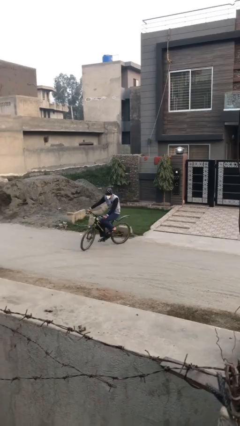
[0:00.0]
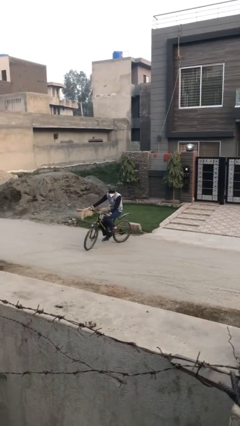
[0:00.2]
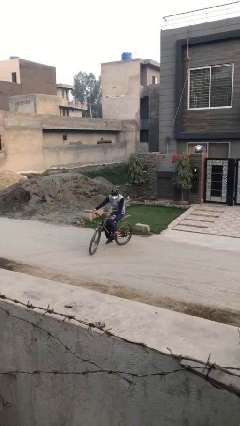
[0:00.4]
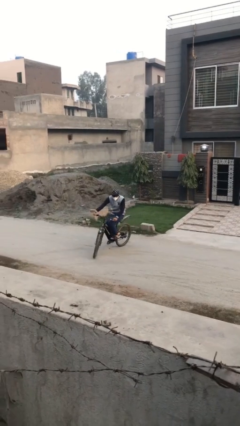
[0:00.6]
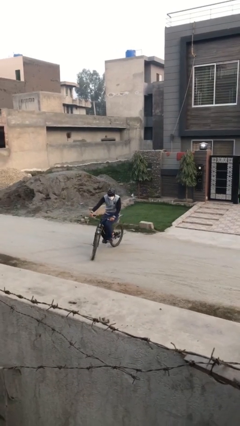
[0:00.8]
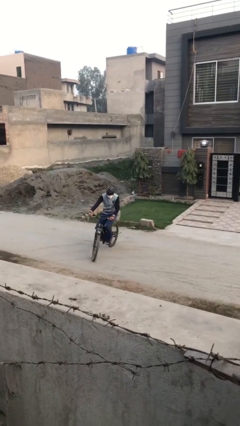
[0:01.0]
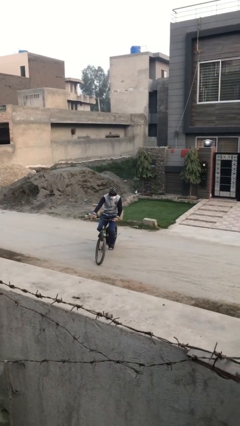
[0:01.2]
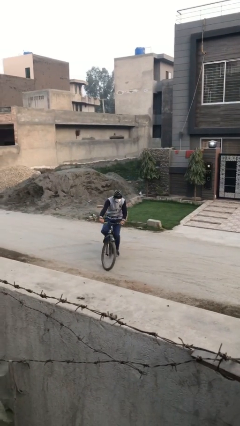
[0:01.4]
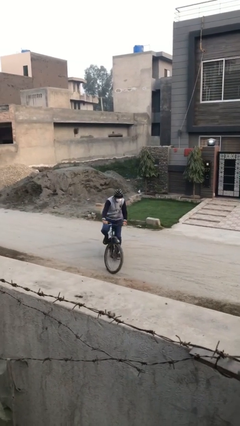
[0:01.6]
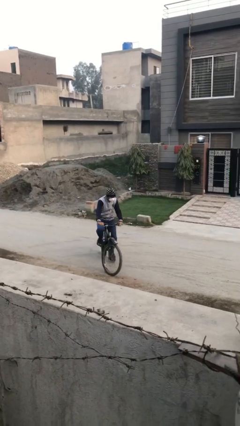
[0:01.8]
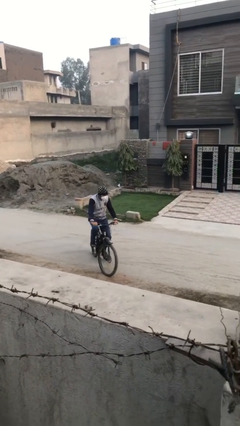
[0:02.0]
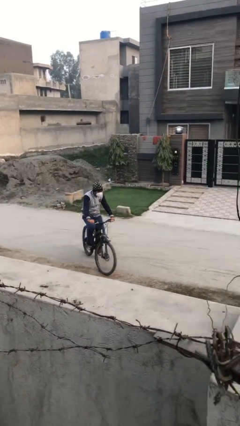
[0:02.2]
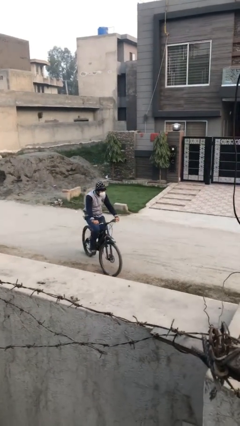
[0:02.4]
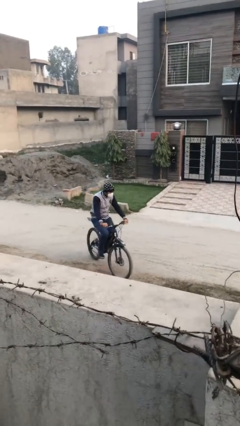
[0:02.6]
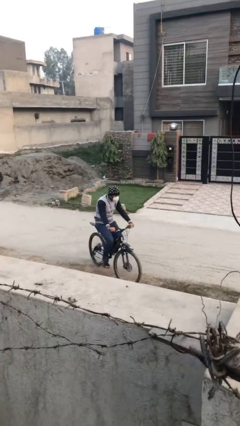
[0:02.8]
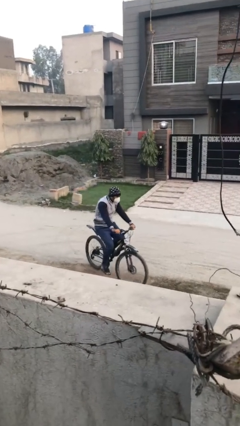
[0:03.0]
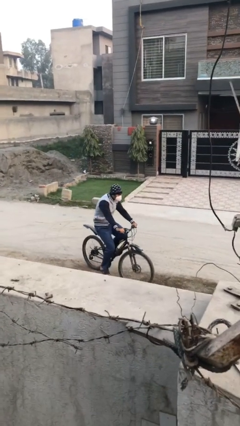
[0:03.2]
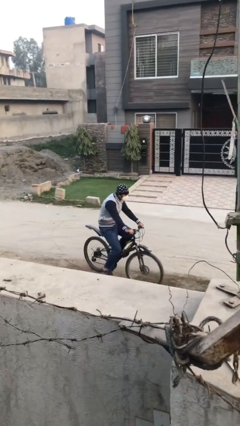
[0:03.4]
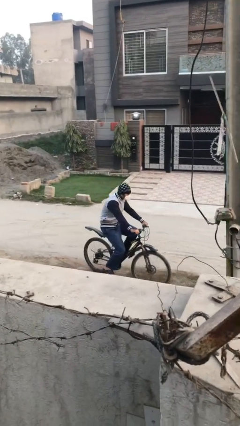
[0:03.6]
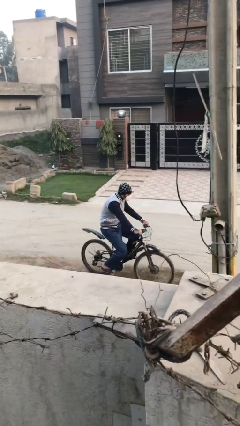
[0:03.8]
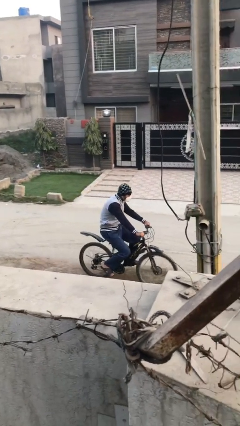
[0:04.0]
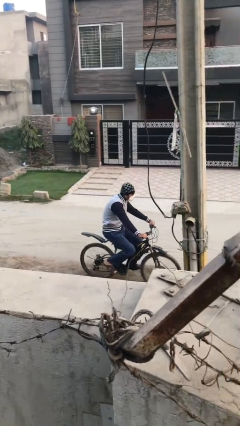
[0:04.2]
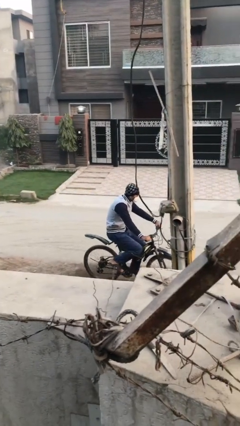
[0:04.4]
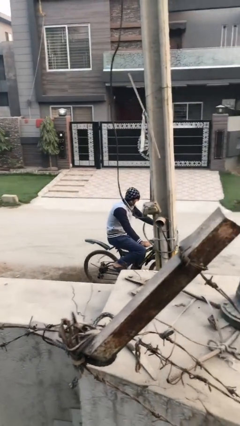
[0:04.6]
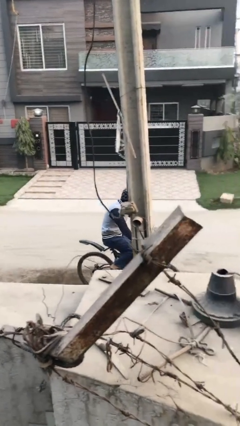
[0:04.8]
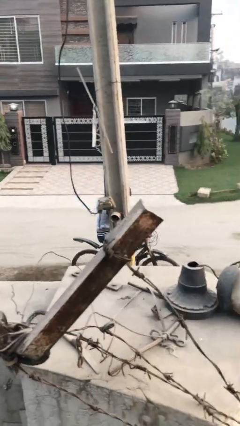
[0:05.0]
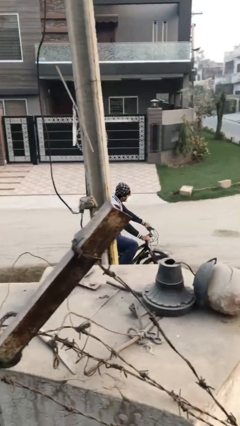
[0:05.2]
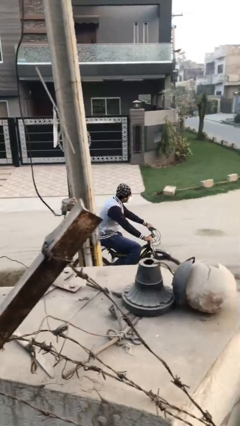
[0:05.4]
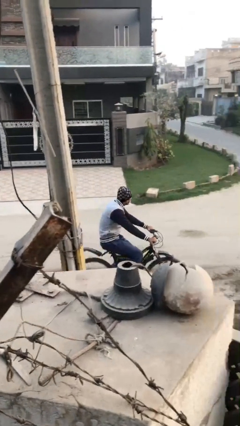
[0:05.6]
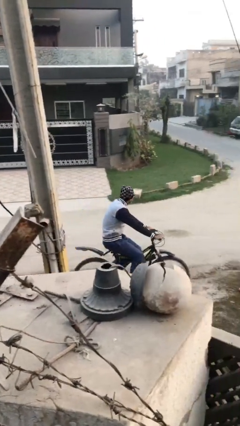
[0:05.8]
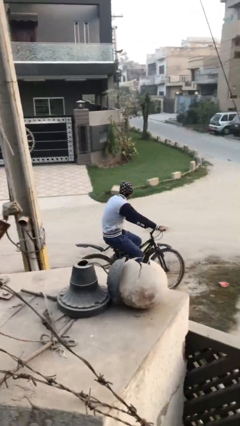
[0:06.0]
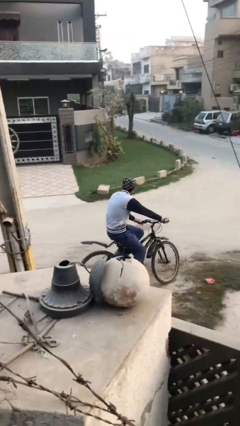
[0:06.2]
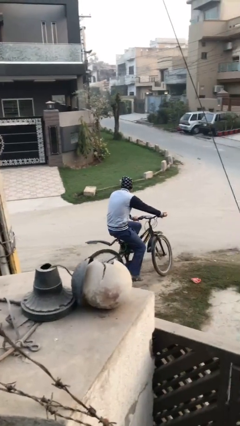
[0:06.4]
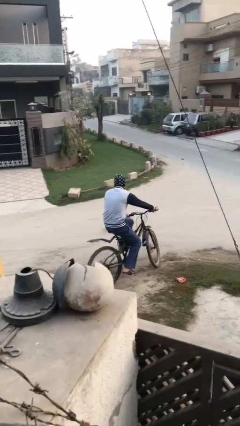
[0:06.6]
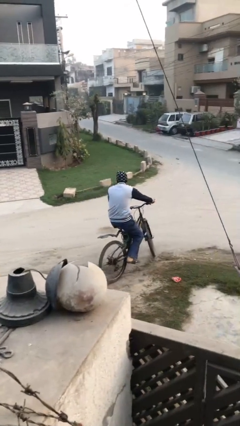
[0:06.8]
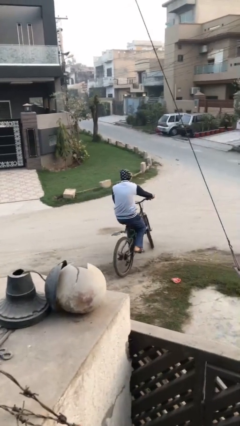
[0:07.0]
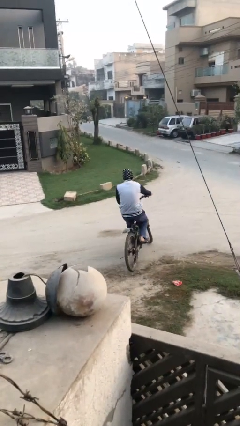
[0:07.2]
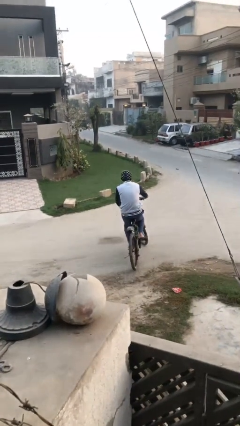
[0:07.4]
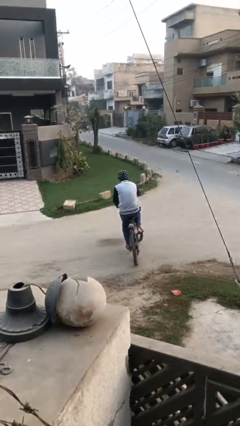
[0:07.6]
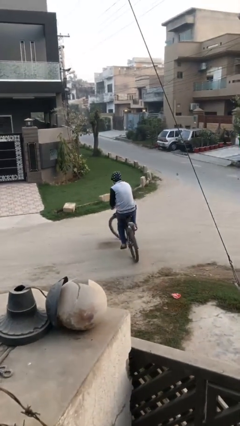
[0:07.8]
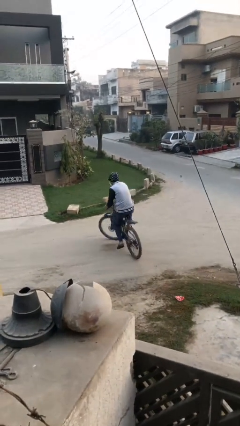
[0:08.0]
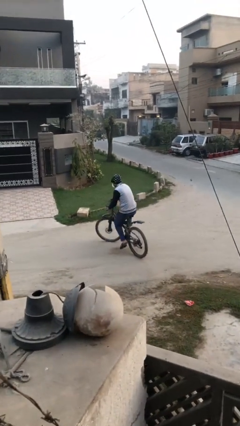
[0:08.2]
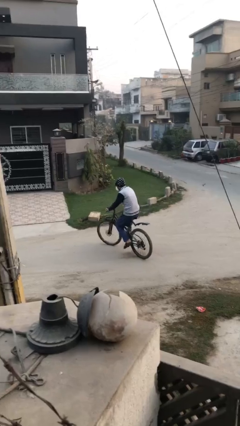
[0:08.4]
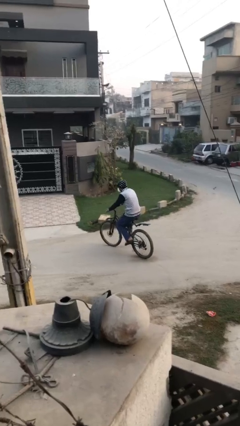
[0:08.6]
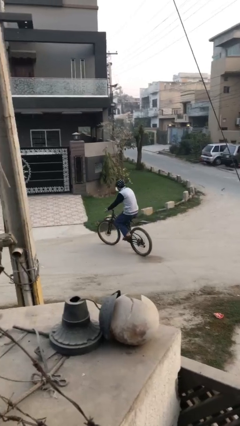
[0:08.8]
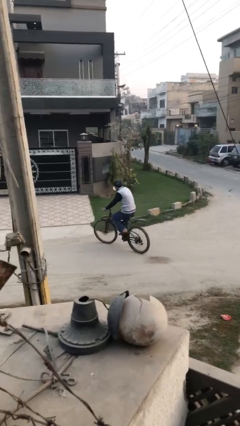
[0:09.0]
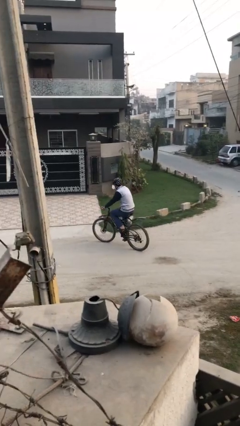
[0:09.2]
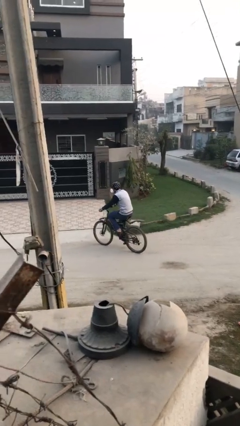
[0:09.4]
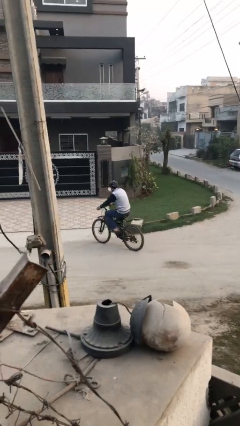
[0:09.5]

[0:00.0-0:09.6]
person rides bicycle

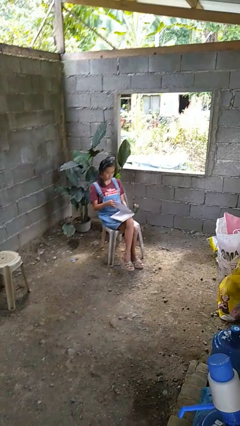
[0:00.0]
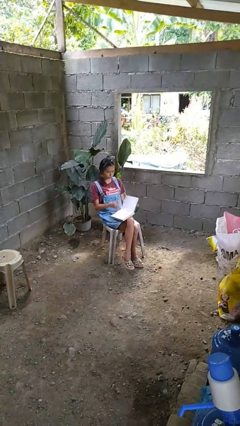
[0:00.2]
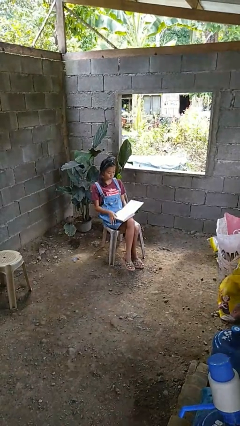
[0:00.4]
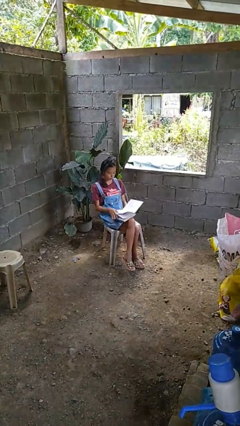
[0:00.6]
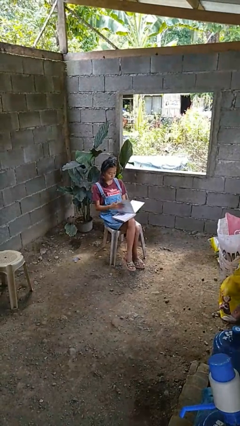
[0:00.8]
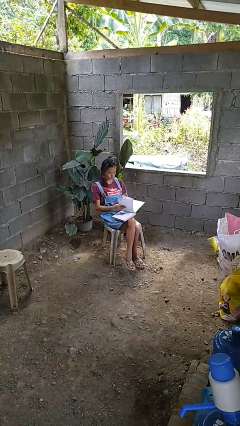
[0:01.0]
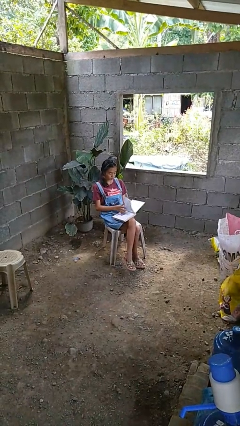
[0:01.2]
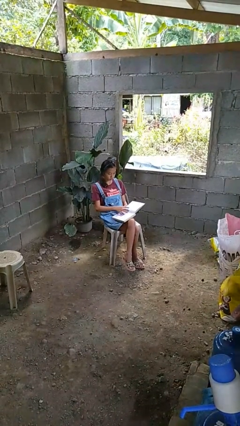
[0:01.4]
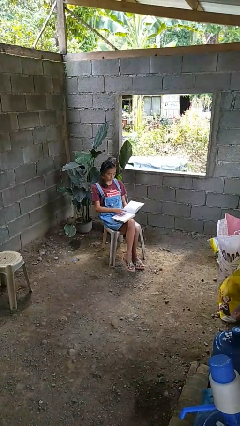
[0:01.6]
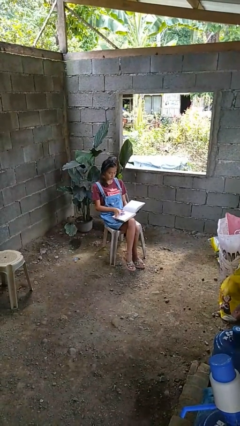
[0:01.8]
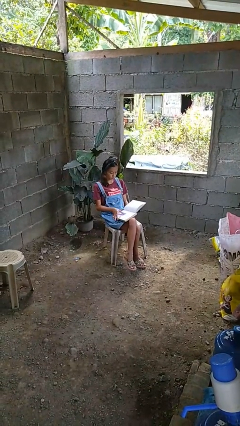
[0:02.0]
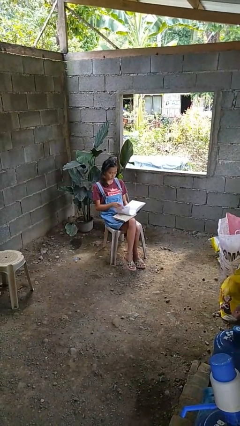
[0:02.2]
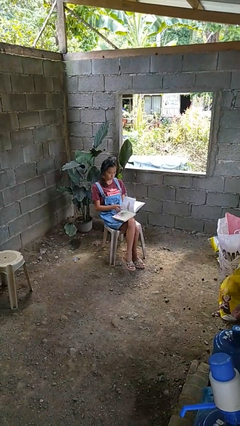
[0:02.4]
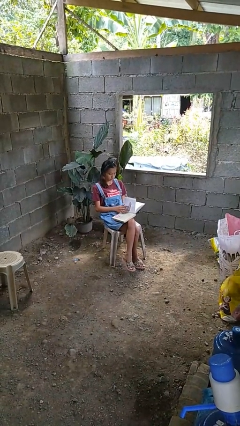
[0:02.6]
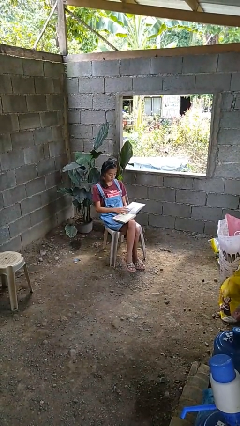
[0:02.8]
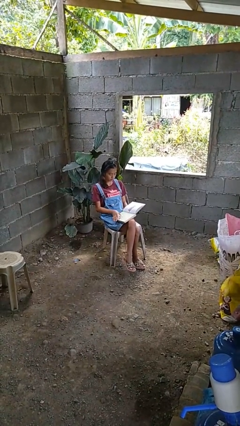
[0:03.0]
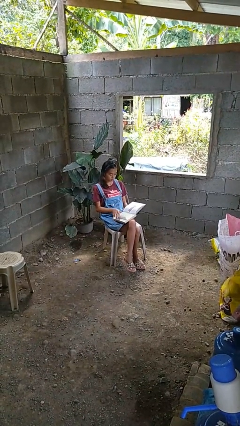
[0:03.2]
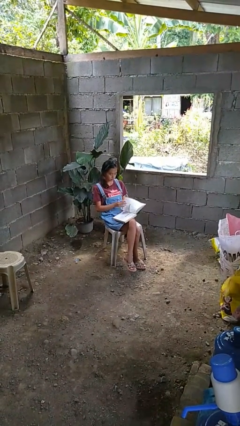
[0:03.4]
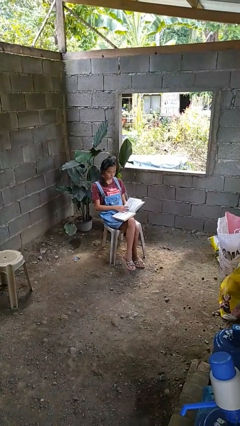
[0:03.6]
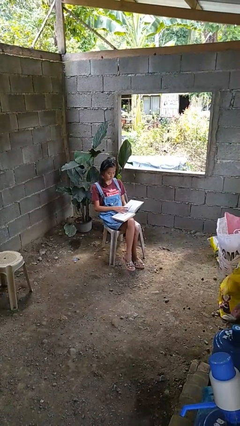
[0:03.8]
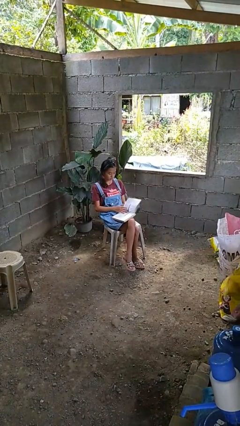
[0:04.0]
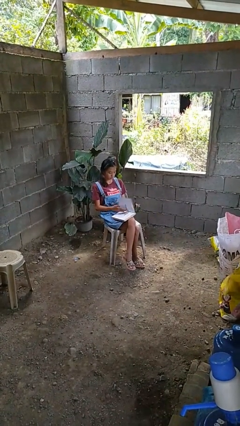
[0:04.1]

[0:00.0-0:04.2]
person reads book

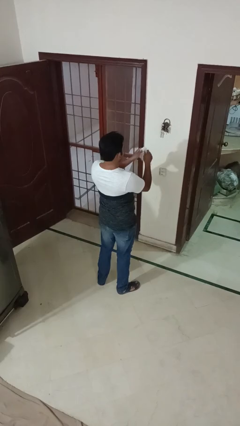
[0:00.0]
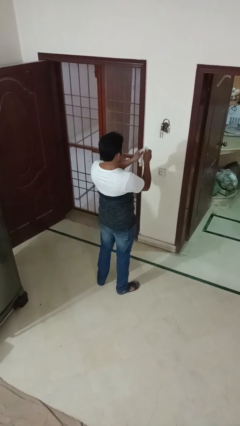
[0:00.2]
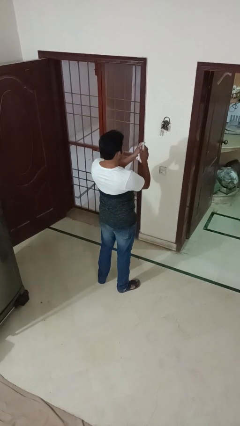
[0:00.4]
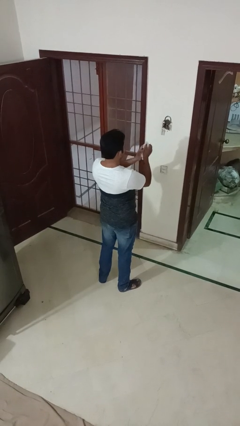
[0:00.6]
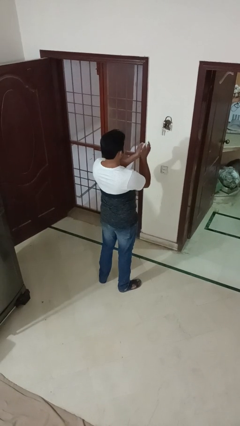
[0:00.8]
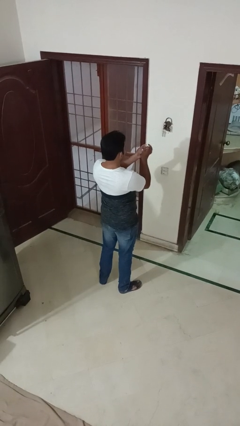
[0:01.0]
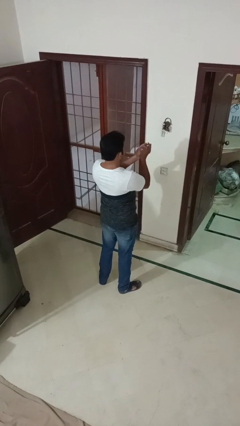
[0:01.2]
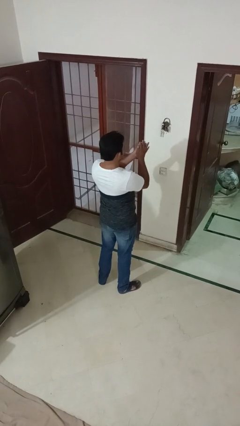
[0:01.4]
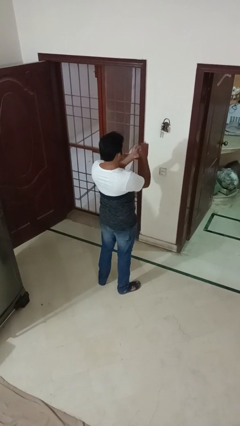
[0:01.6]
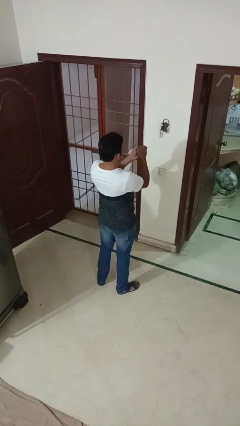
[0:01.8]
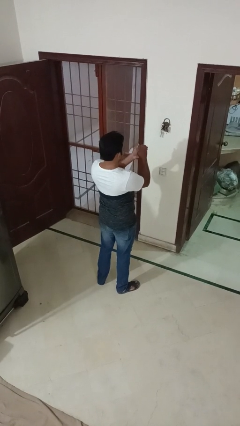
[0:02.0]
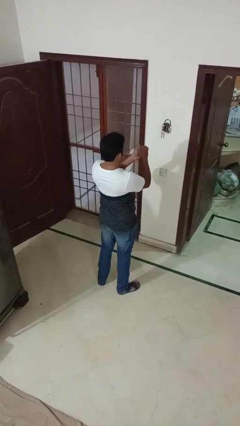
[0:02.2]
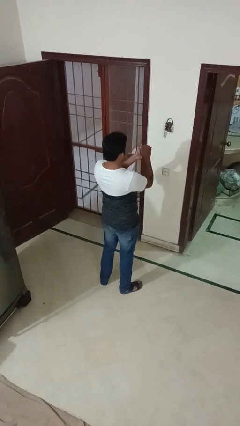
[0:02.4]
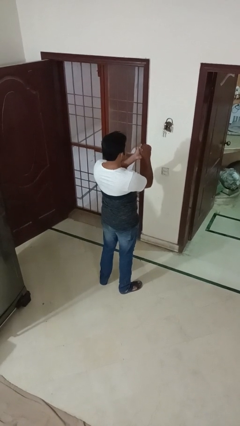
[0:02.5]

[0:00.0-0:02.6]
person crumples paper

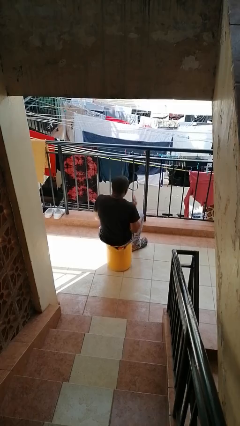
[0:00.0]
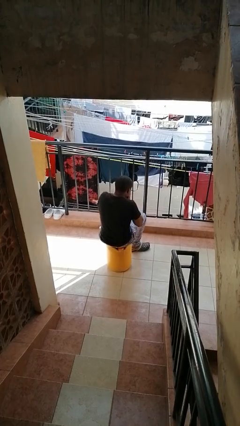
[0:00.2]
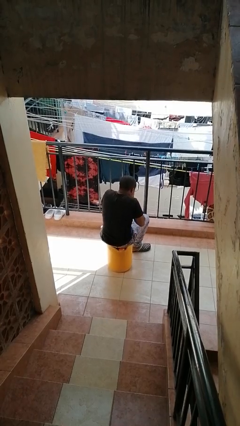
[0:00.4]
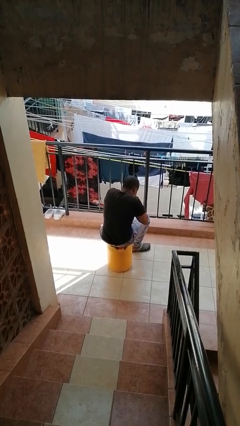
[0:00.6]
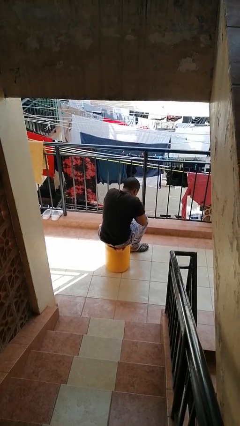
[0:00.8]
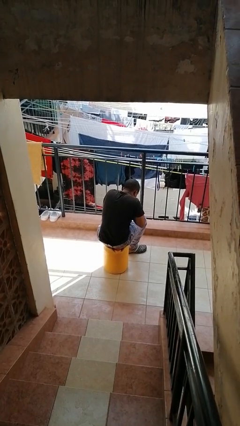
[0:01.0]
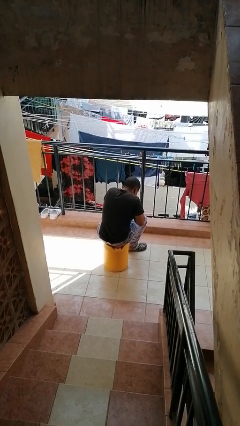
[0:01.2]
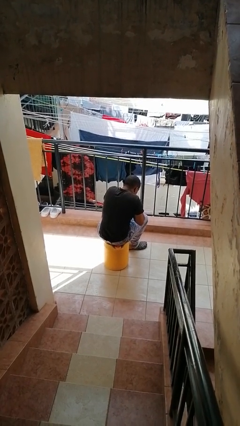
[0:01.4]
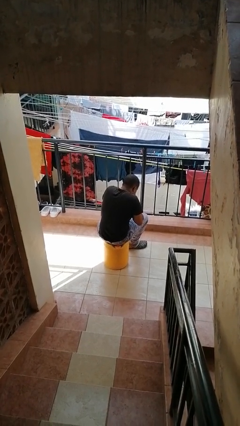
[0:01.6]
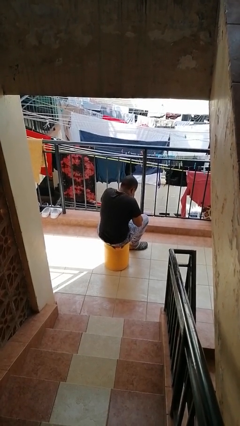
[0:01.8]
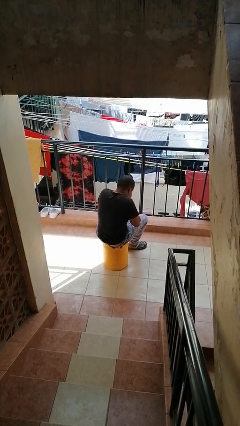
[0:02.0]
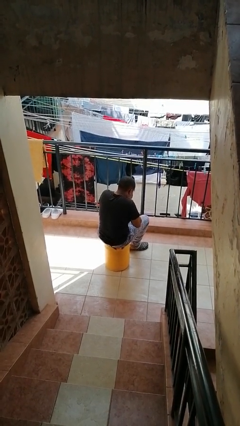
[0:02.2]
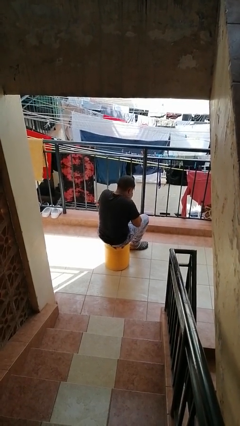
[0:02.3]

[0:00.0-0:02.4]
person blows into hands
